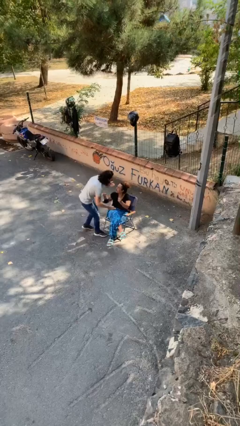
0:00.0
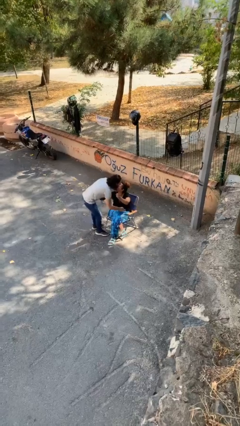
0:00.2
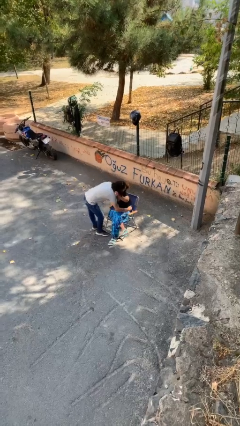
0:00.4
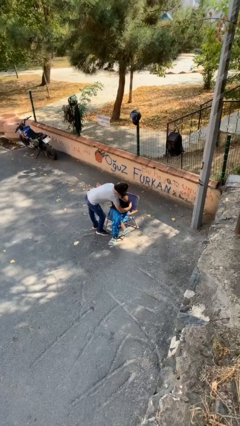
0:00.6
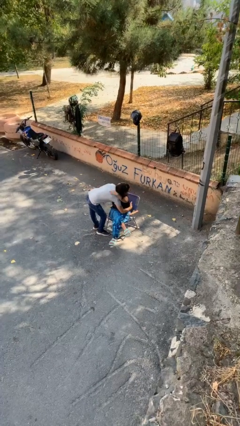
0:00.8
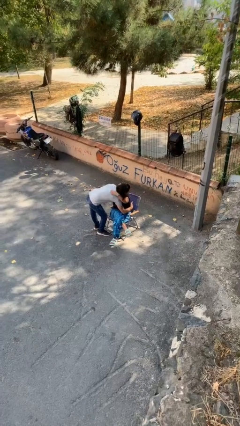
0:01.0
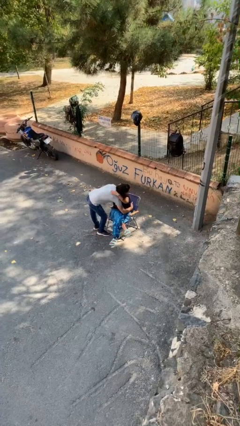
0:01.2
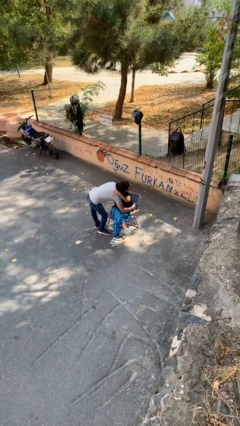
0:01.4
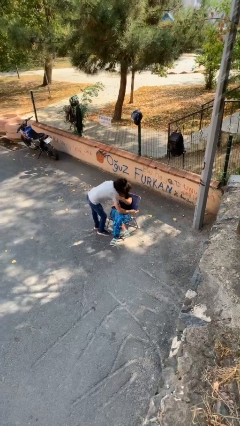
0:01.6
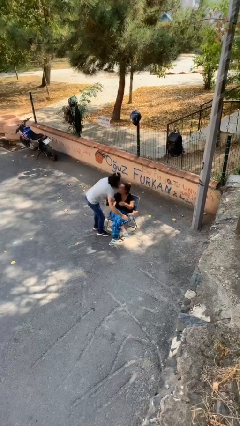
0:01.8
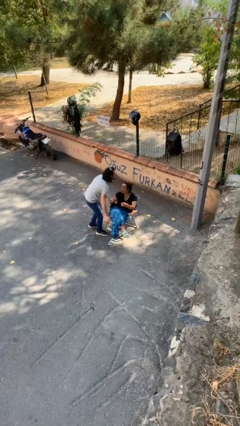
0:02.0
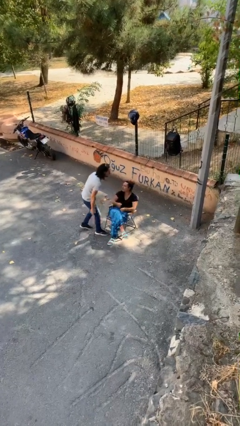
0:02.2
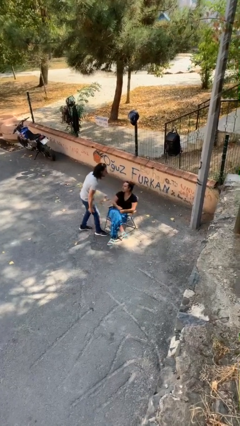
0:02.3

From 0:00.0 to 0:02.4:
person embraces person

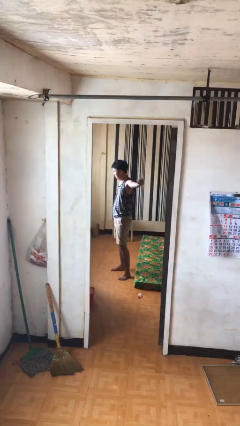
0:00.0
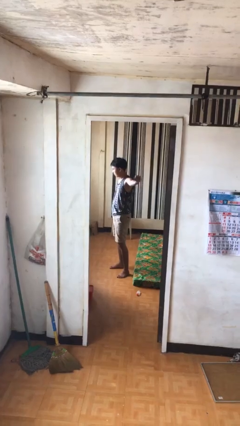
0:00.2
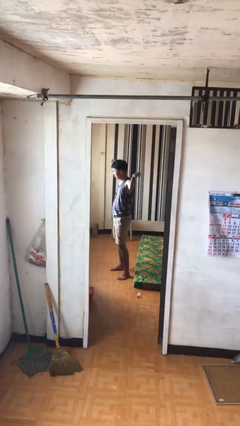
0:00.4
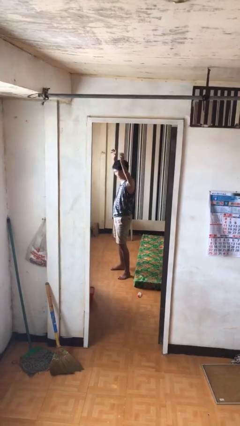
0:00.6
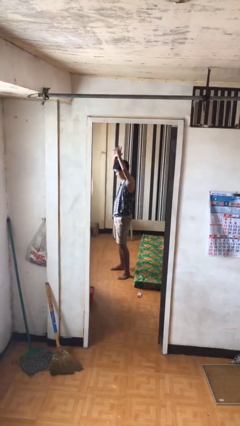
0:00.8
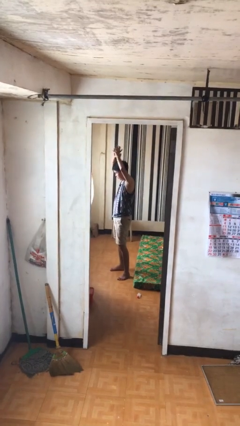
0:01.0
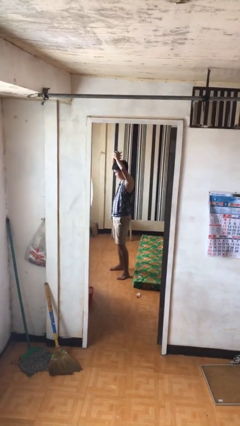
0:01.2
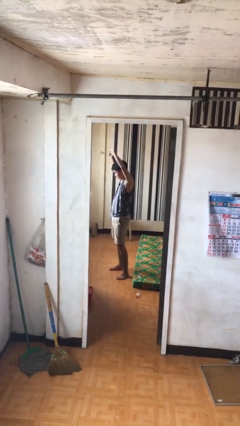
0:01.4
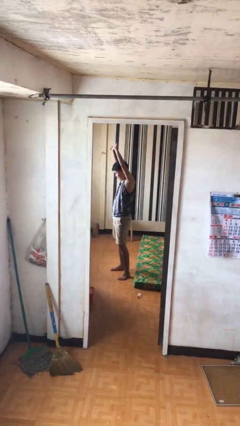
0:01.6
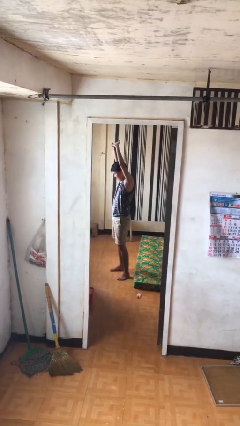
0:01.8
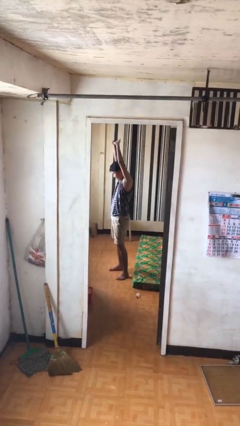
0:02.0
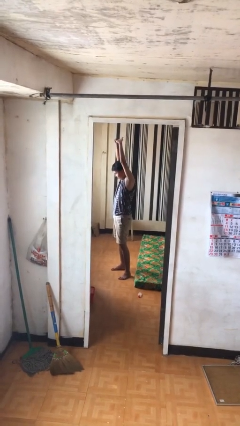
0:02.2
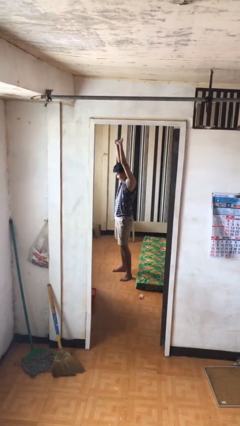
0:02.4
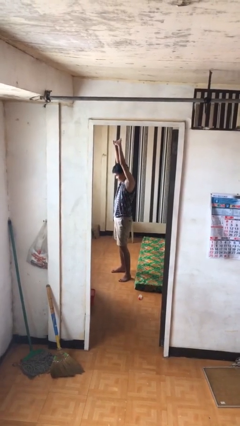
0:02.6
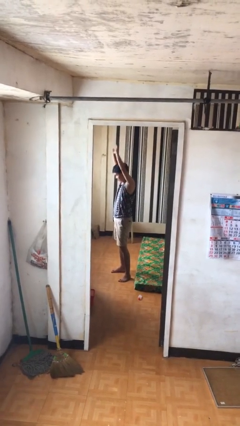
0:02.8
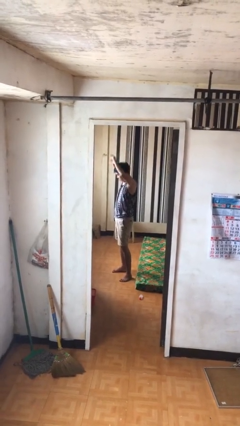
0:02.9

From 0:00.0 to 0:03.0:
person stretches arms over head

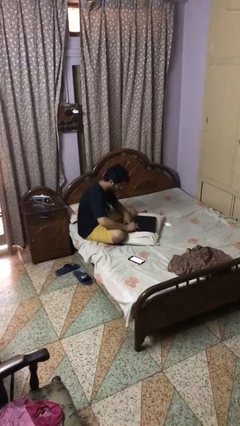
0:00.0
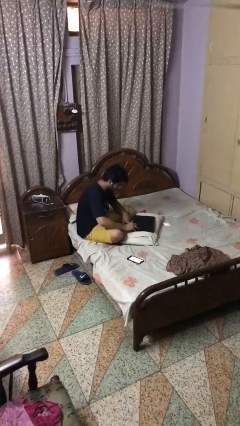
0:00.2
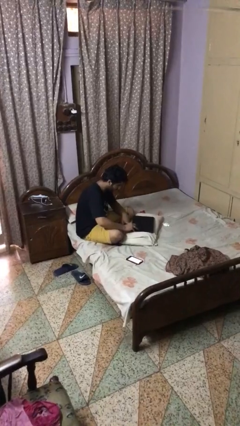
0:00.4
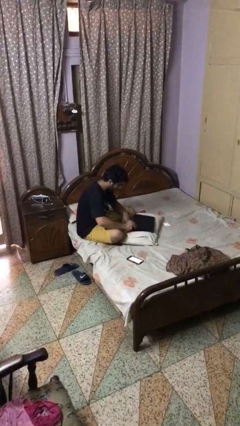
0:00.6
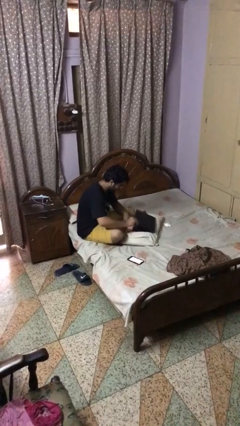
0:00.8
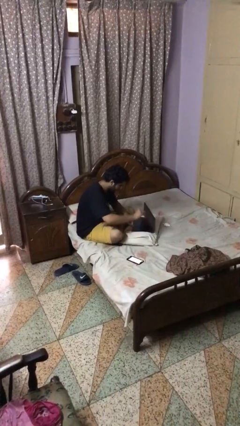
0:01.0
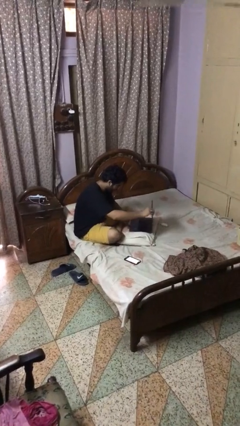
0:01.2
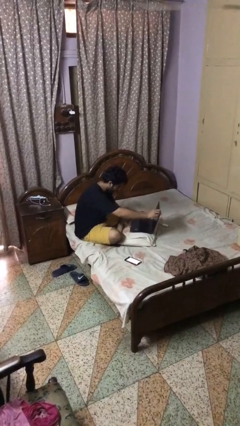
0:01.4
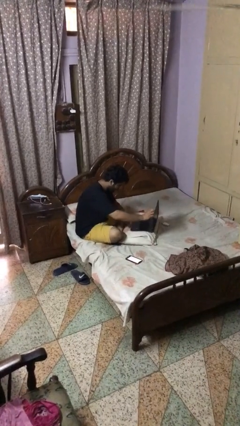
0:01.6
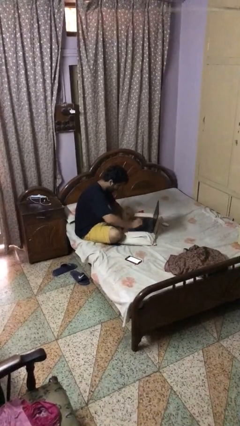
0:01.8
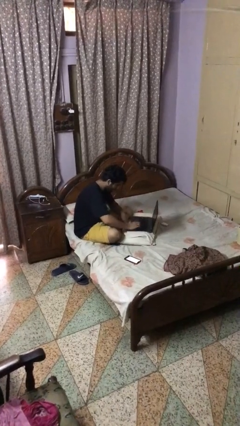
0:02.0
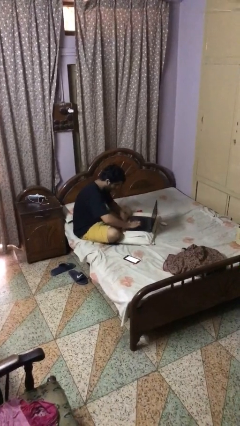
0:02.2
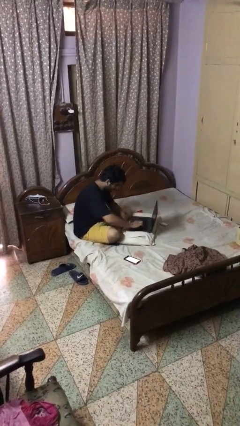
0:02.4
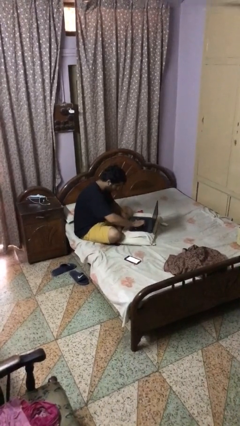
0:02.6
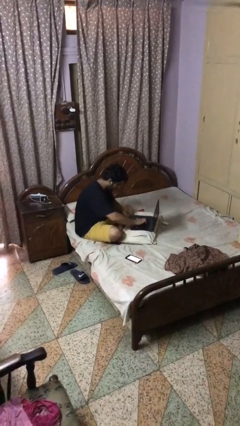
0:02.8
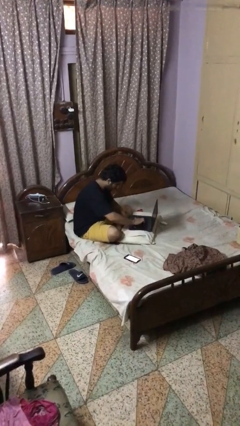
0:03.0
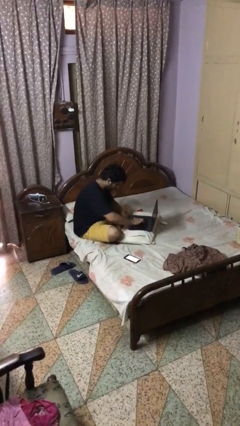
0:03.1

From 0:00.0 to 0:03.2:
person opens laptop

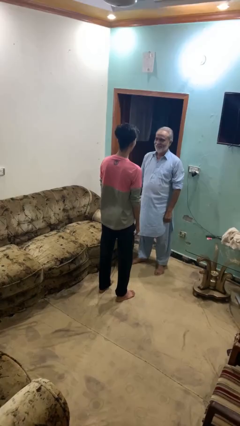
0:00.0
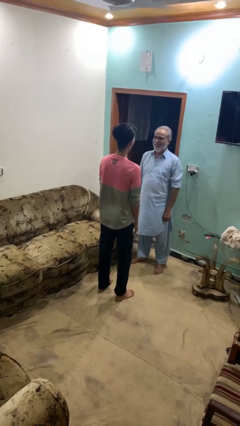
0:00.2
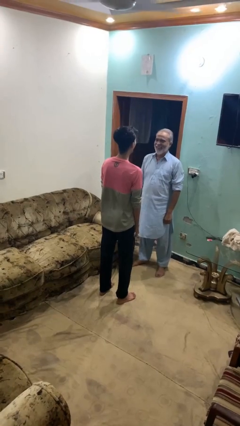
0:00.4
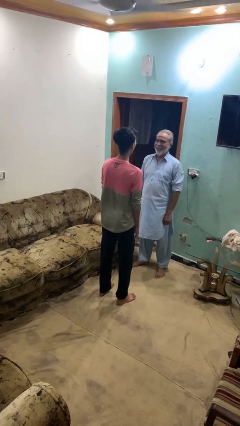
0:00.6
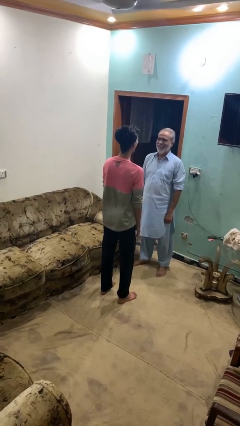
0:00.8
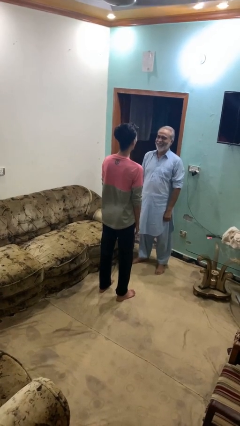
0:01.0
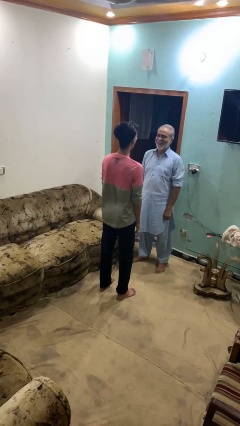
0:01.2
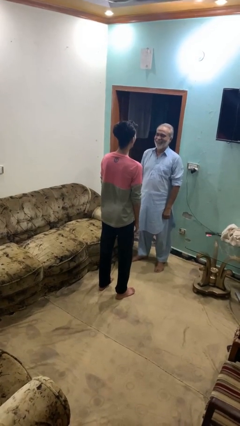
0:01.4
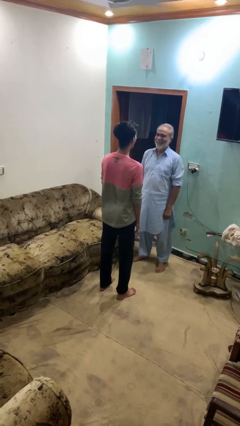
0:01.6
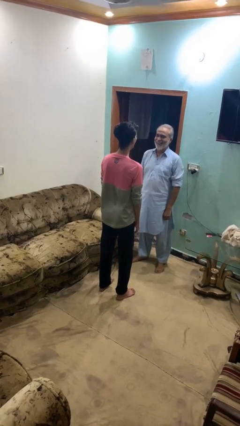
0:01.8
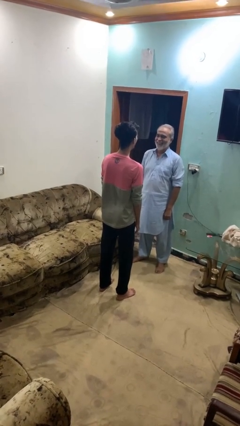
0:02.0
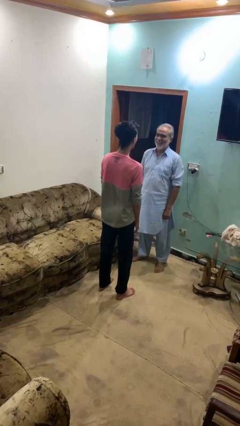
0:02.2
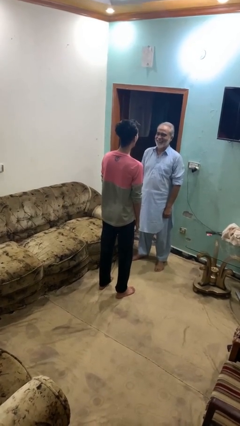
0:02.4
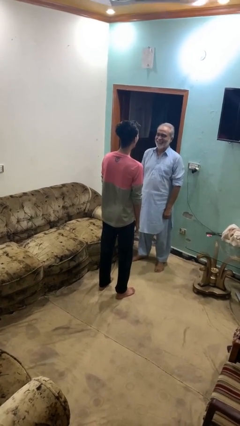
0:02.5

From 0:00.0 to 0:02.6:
person laughs with person

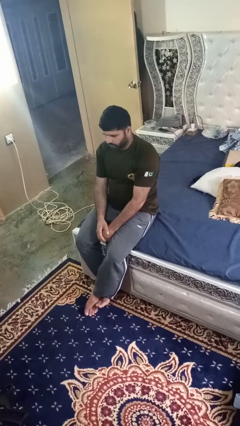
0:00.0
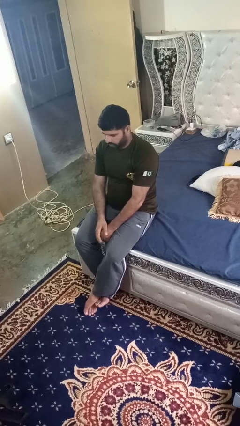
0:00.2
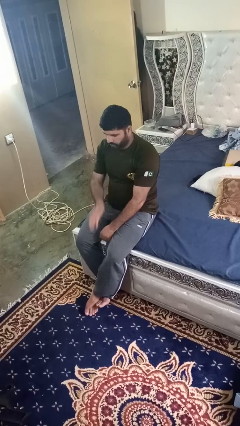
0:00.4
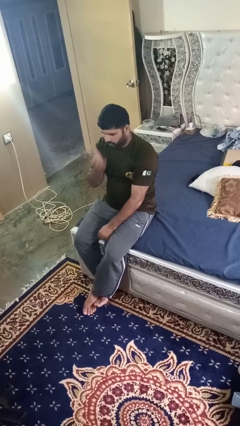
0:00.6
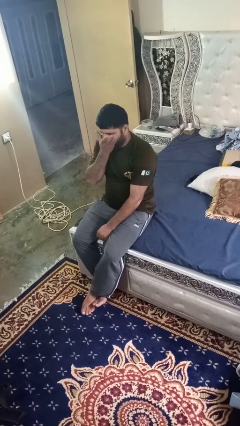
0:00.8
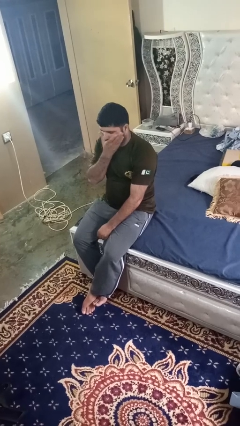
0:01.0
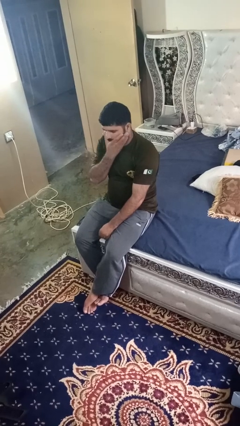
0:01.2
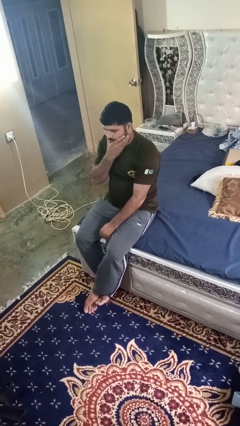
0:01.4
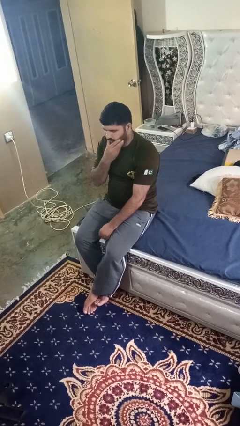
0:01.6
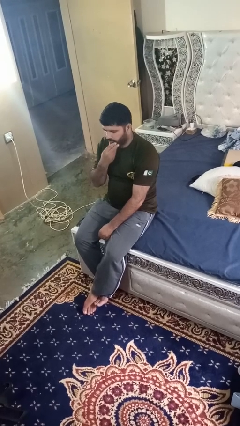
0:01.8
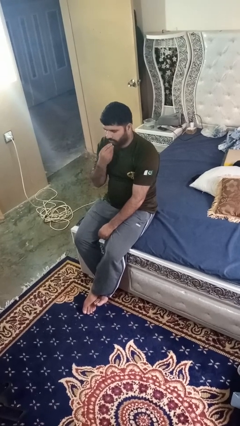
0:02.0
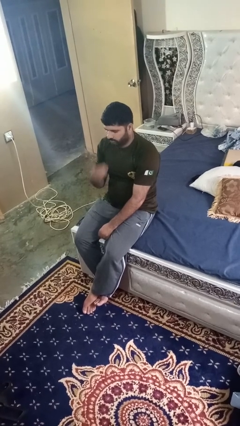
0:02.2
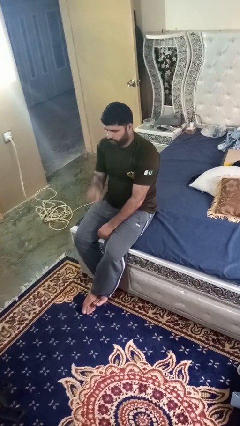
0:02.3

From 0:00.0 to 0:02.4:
person strokes chin

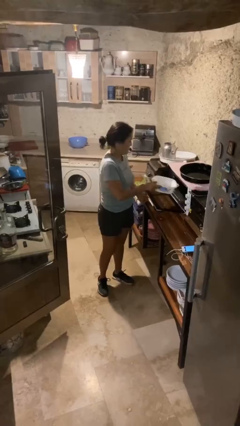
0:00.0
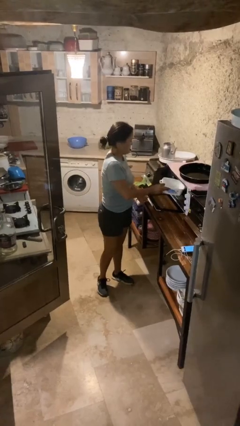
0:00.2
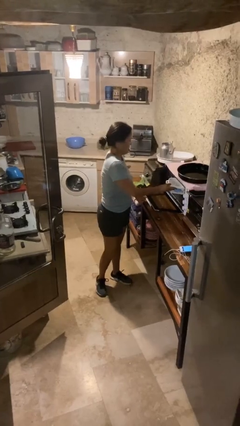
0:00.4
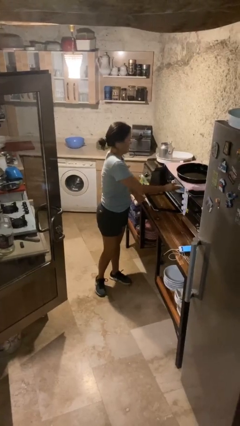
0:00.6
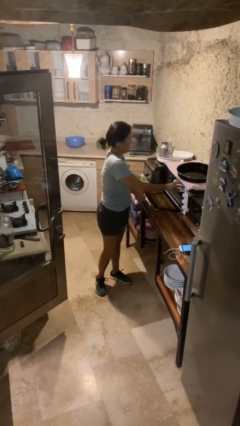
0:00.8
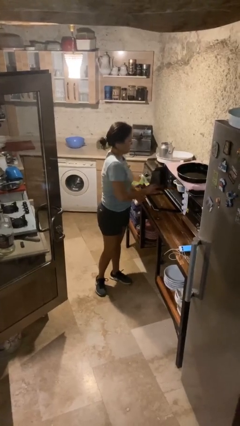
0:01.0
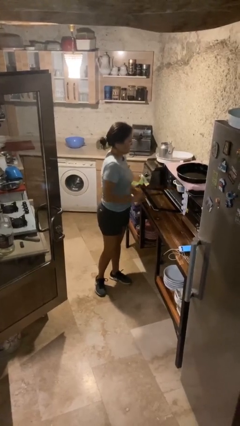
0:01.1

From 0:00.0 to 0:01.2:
person puts object into microwave

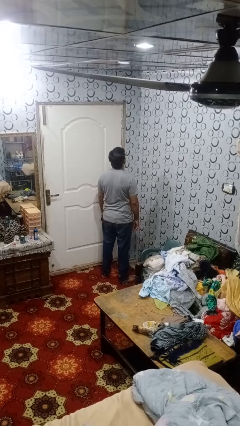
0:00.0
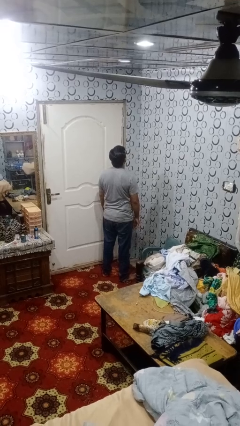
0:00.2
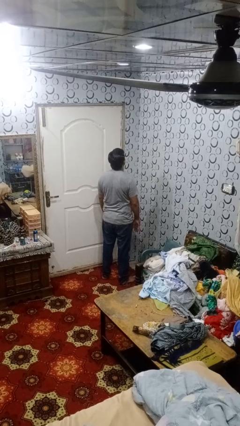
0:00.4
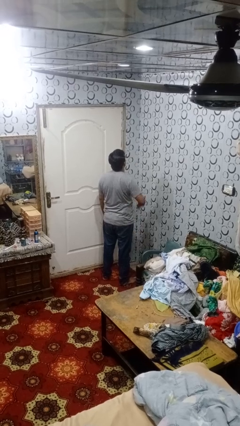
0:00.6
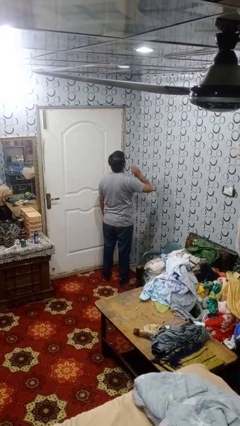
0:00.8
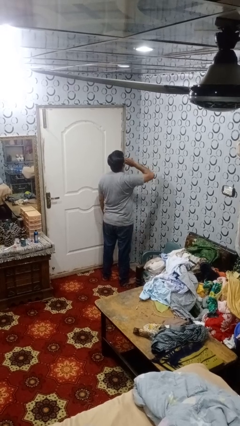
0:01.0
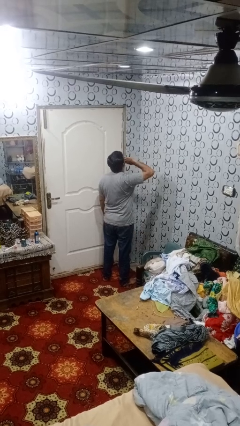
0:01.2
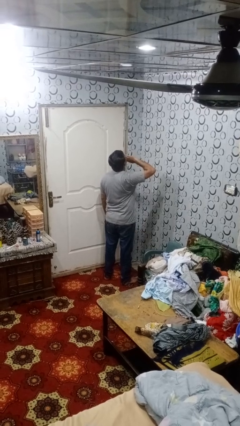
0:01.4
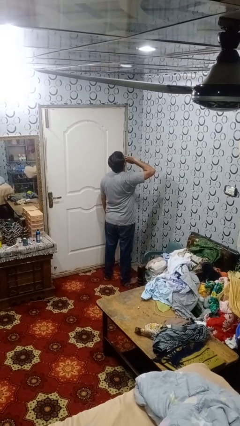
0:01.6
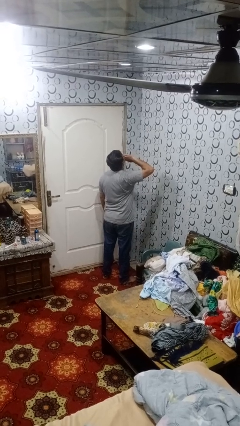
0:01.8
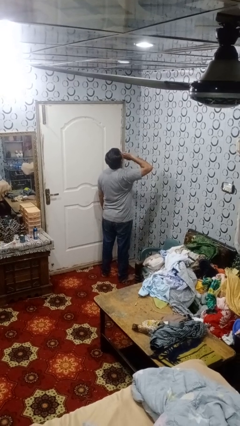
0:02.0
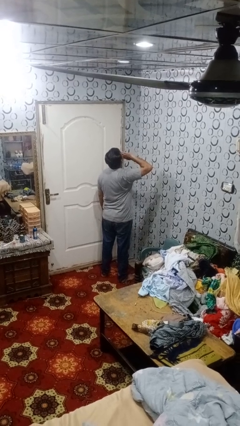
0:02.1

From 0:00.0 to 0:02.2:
person yawns

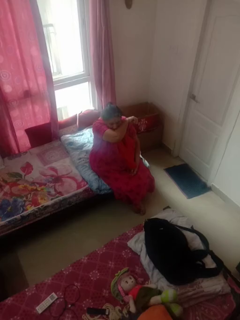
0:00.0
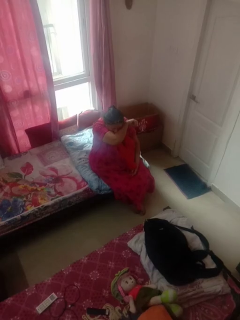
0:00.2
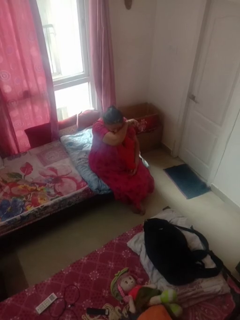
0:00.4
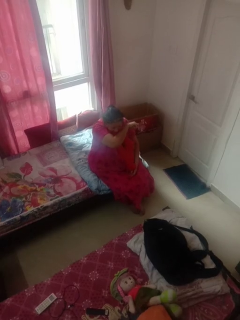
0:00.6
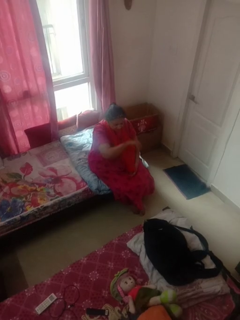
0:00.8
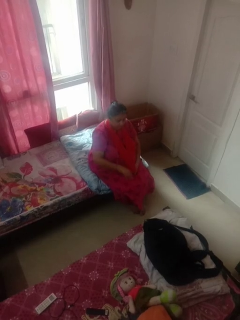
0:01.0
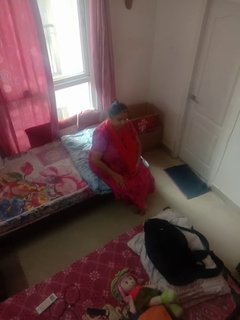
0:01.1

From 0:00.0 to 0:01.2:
person sneezes into arm
